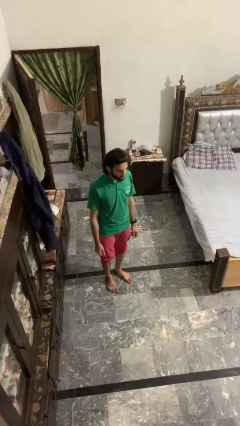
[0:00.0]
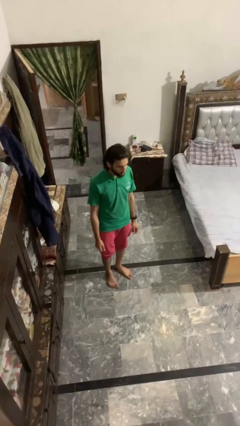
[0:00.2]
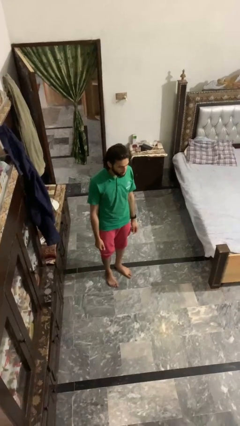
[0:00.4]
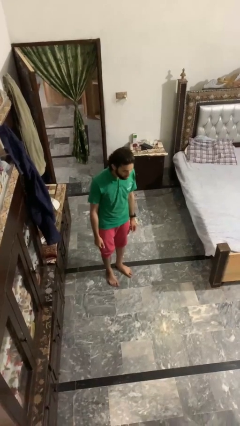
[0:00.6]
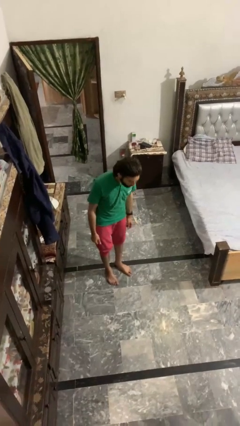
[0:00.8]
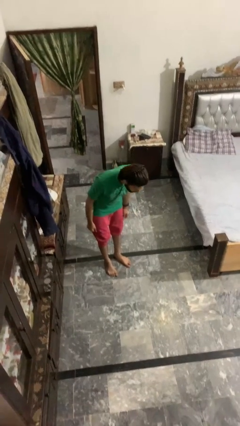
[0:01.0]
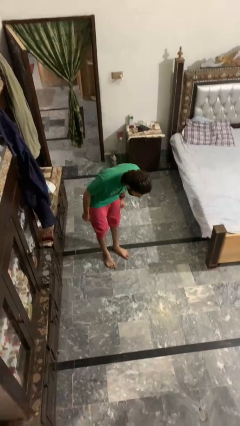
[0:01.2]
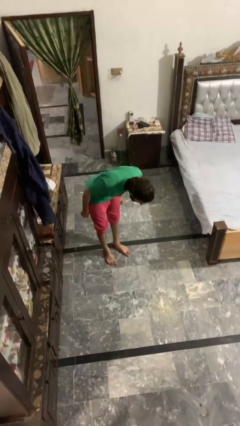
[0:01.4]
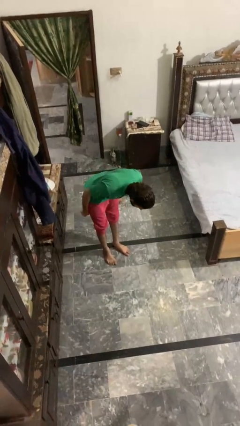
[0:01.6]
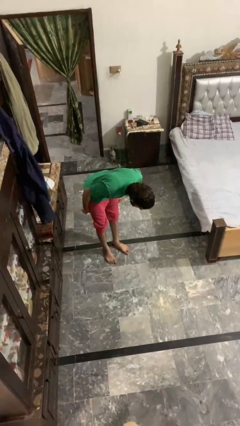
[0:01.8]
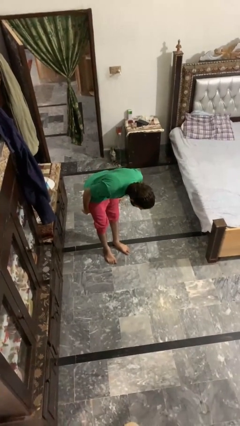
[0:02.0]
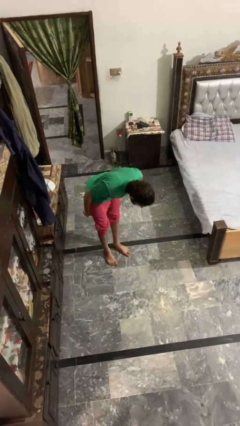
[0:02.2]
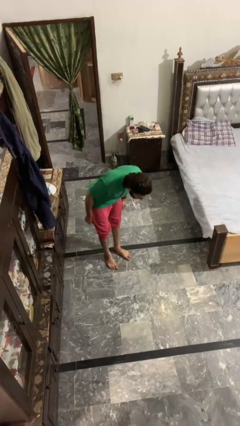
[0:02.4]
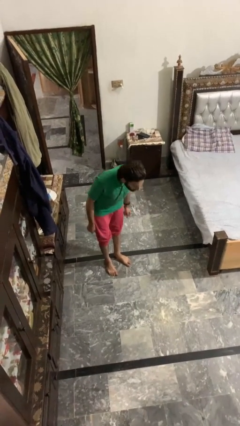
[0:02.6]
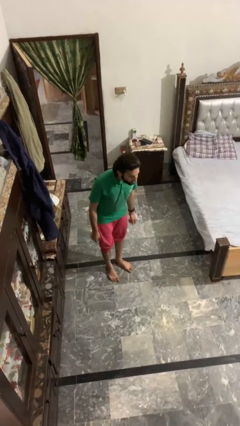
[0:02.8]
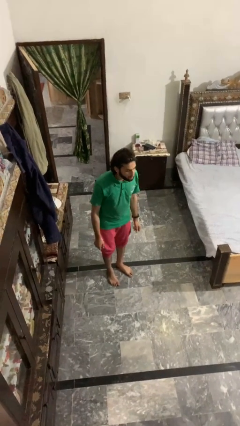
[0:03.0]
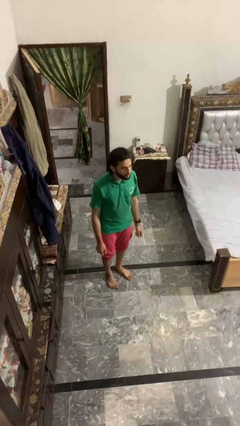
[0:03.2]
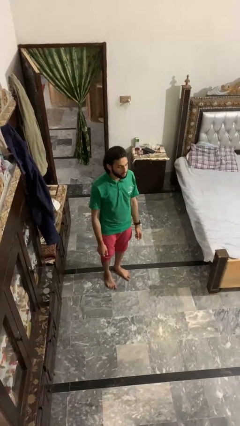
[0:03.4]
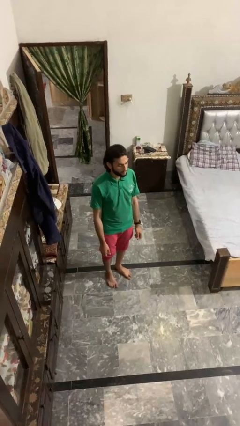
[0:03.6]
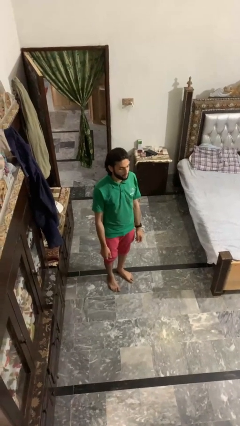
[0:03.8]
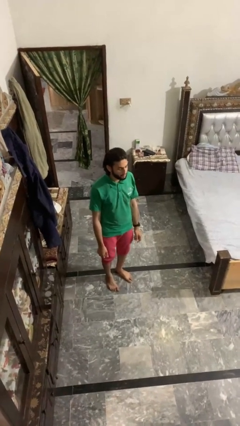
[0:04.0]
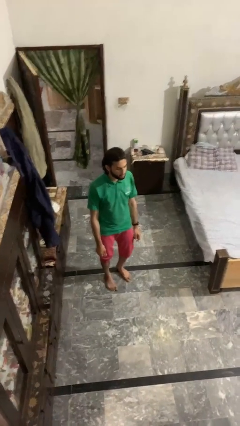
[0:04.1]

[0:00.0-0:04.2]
person bows

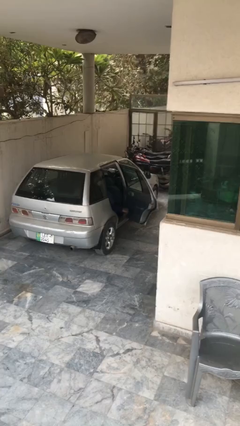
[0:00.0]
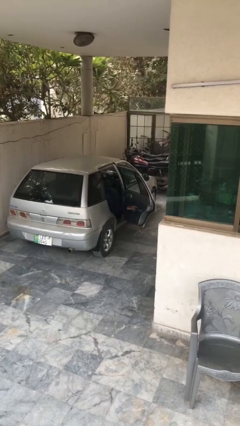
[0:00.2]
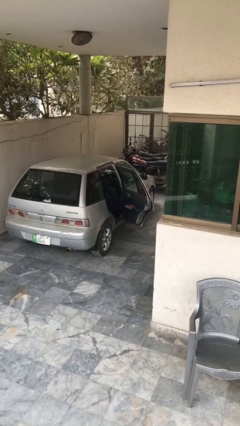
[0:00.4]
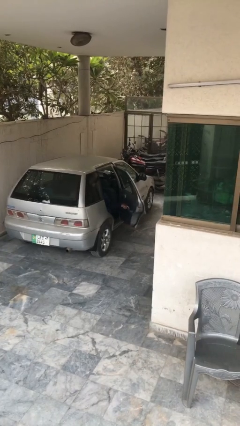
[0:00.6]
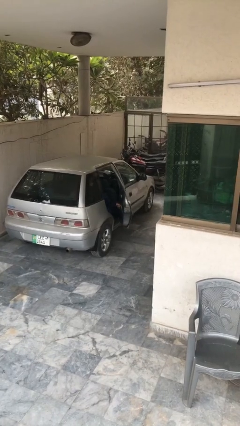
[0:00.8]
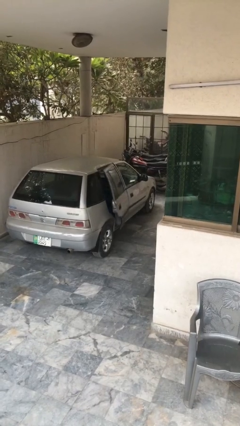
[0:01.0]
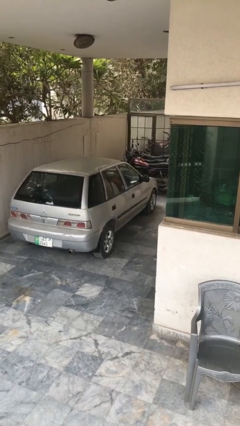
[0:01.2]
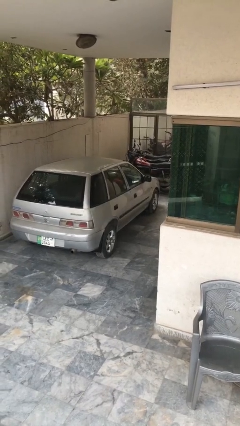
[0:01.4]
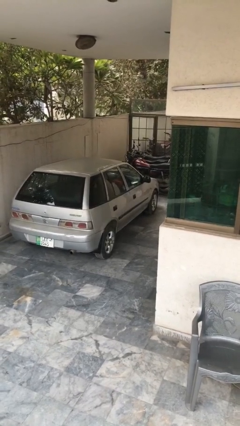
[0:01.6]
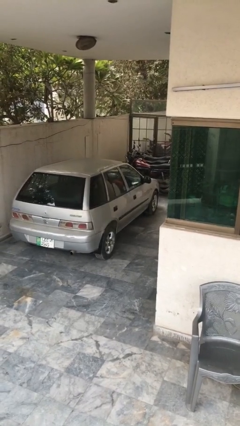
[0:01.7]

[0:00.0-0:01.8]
person closes car door

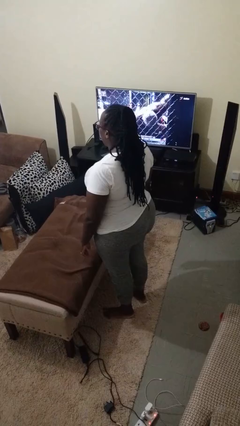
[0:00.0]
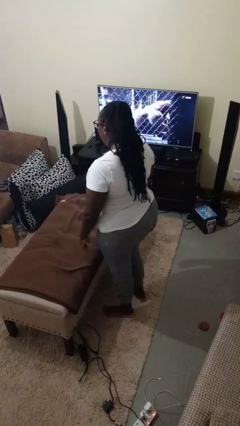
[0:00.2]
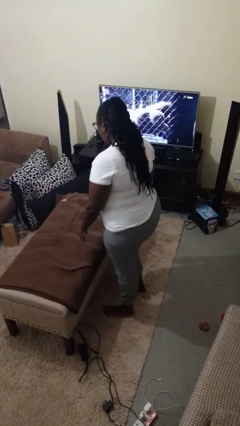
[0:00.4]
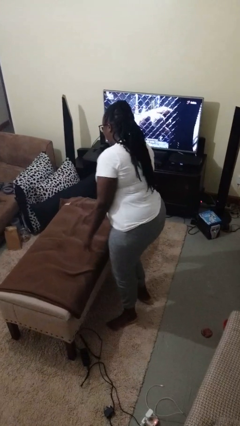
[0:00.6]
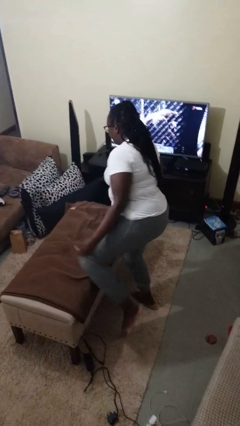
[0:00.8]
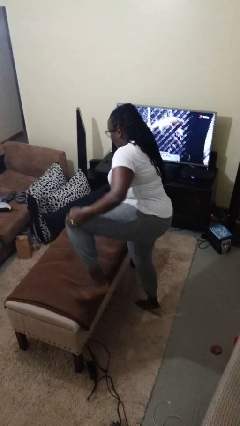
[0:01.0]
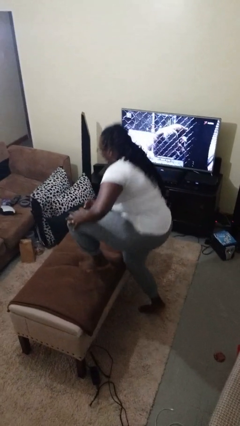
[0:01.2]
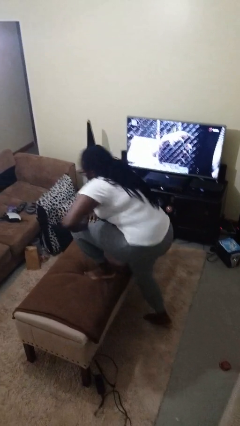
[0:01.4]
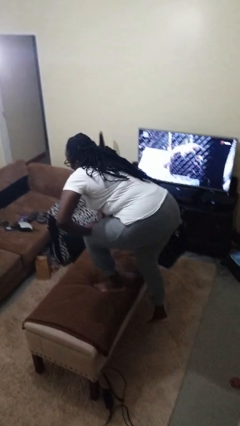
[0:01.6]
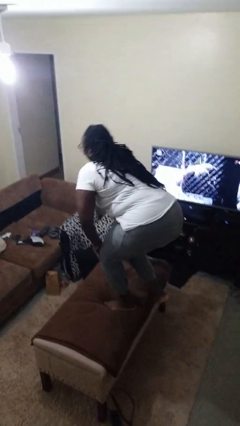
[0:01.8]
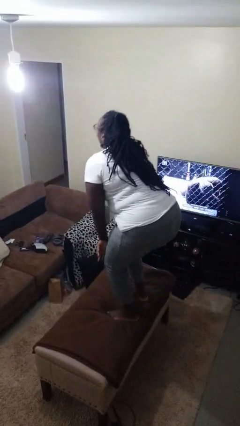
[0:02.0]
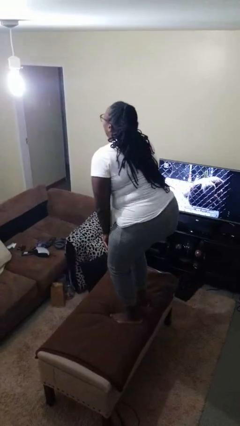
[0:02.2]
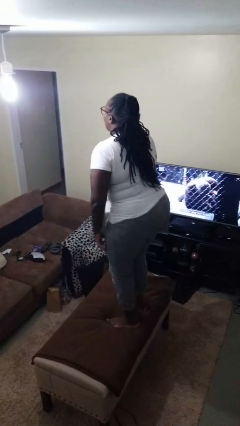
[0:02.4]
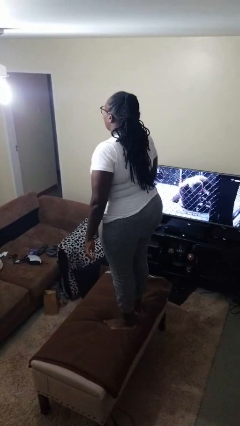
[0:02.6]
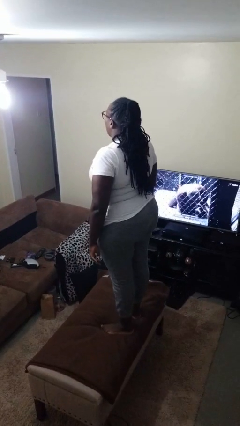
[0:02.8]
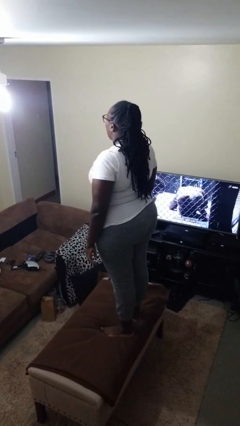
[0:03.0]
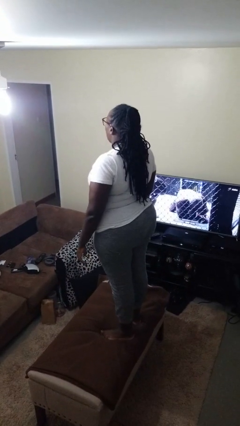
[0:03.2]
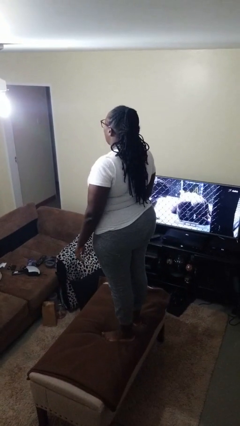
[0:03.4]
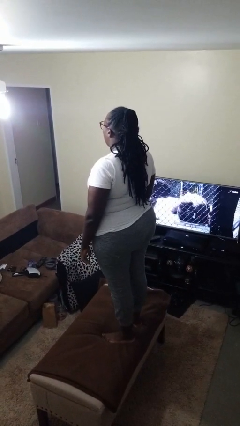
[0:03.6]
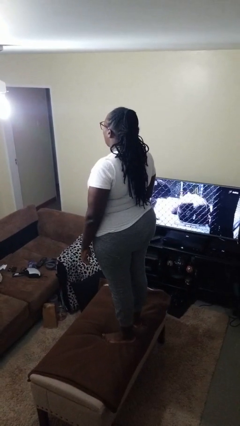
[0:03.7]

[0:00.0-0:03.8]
person climbs on table

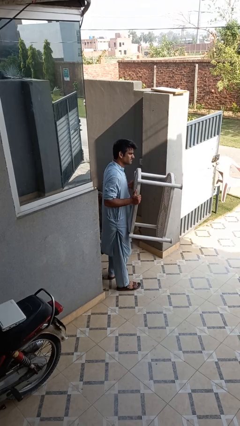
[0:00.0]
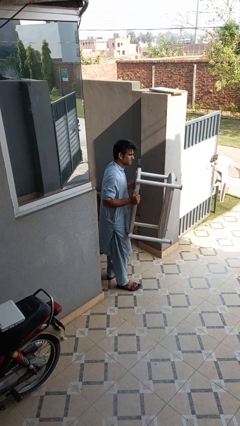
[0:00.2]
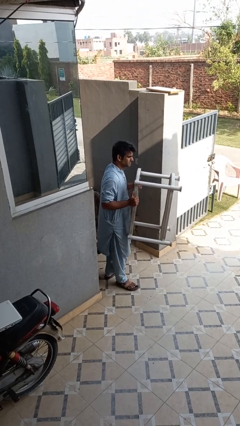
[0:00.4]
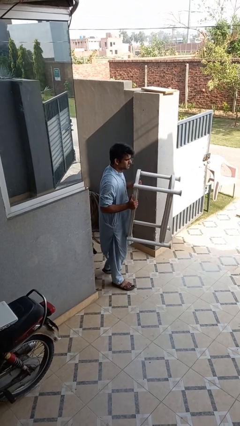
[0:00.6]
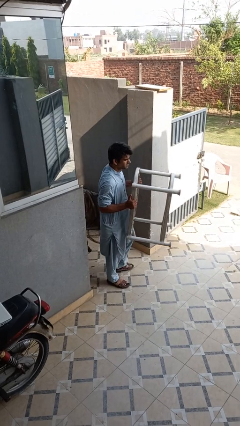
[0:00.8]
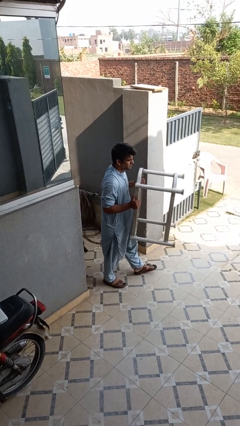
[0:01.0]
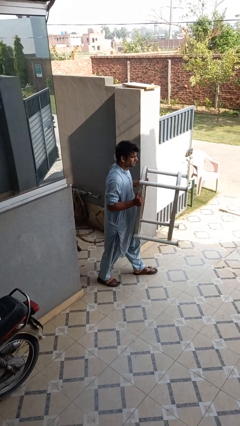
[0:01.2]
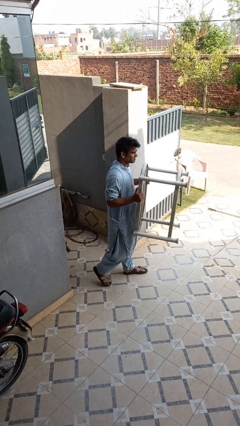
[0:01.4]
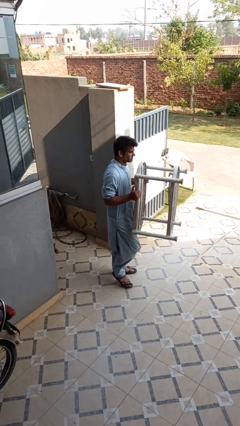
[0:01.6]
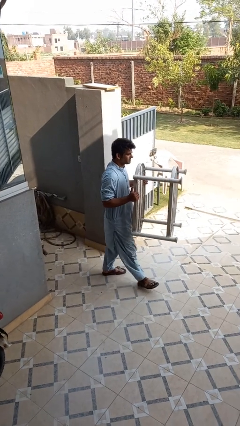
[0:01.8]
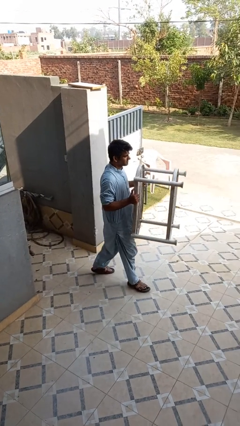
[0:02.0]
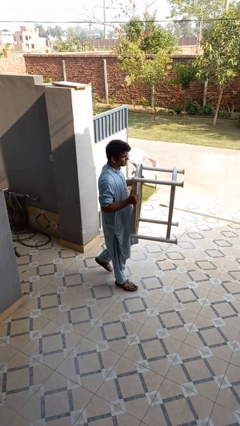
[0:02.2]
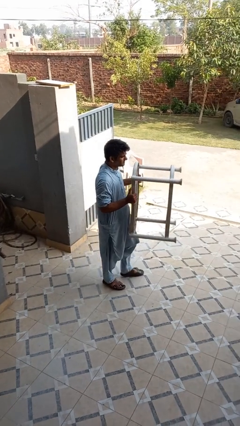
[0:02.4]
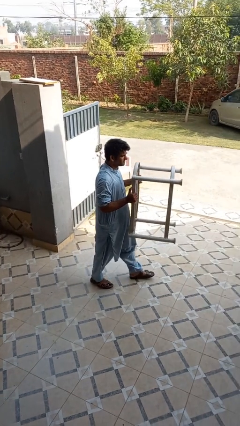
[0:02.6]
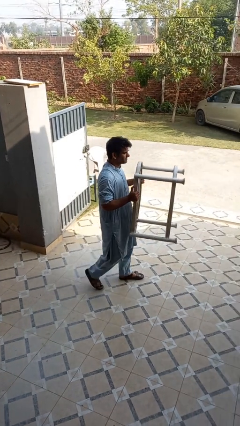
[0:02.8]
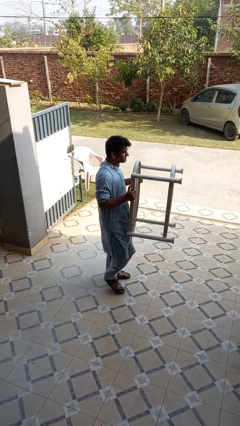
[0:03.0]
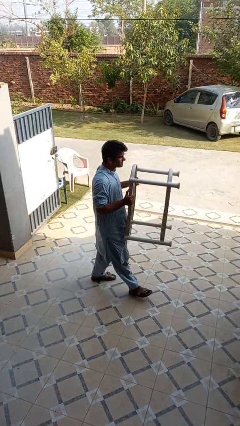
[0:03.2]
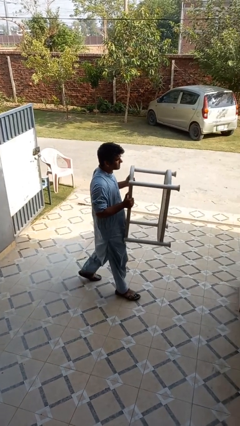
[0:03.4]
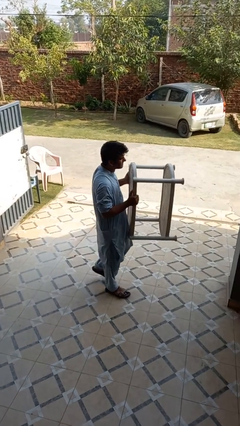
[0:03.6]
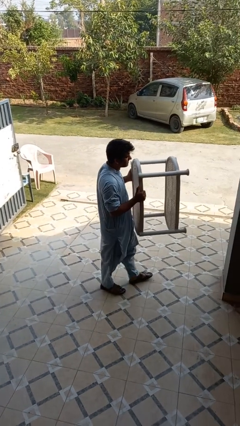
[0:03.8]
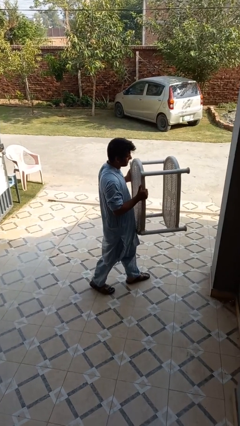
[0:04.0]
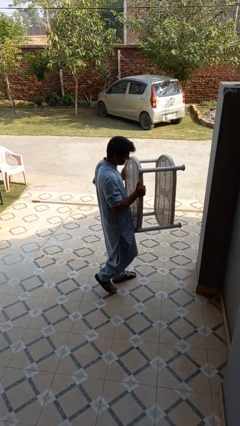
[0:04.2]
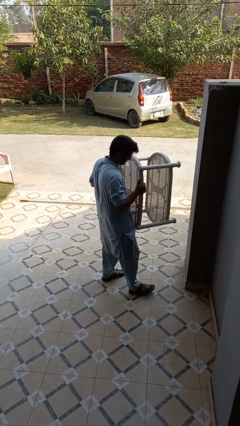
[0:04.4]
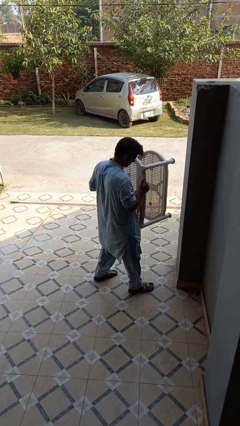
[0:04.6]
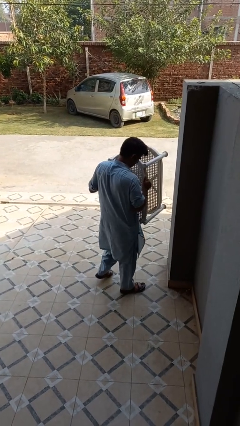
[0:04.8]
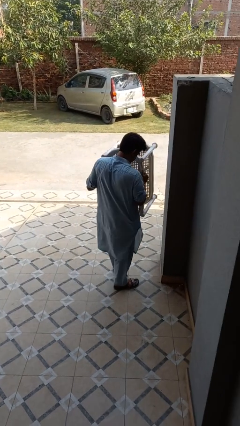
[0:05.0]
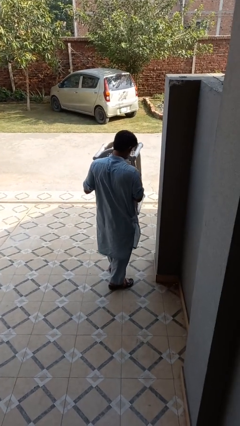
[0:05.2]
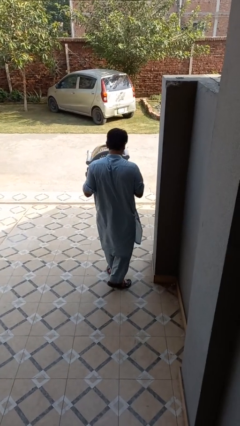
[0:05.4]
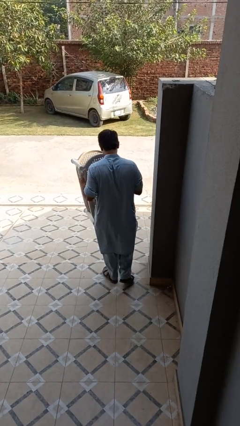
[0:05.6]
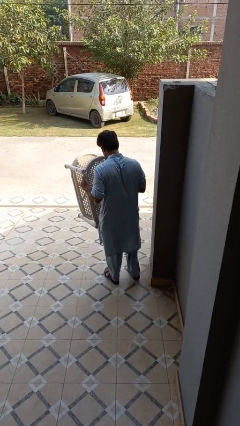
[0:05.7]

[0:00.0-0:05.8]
person carries furniture

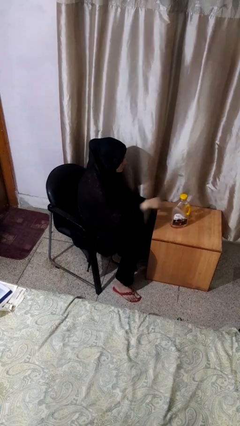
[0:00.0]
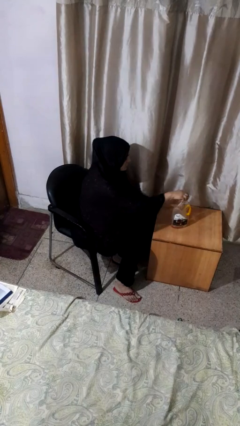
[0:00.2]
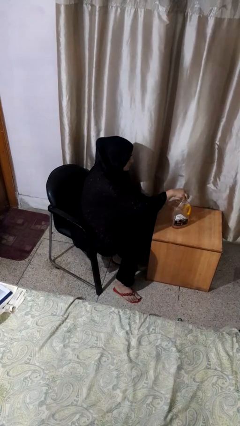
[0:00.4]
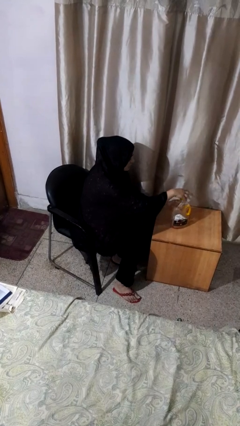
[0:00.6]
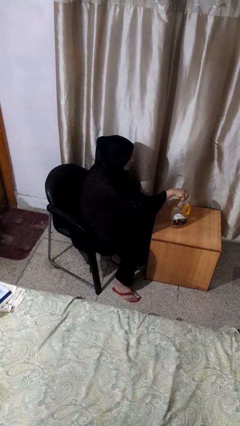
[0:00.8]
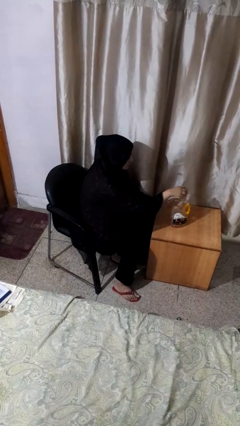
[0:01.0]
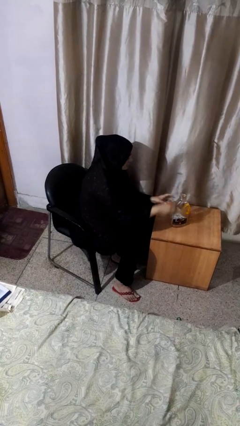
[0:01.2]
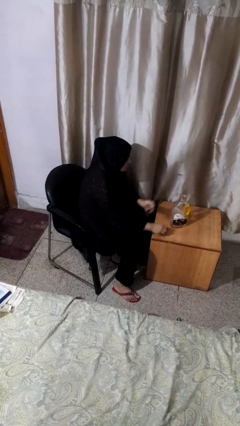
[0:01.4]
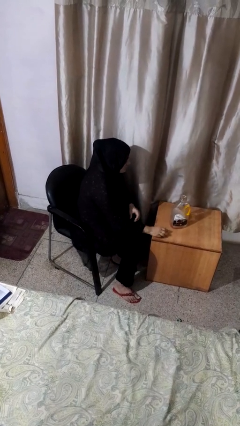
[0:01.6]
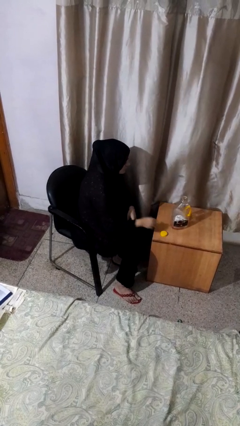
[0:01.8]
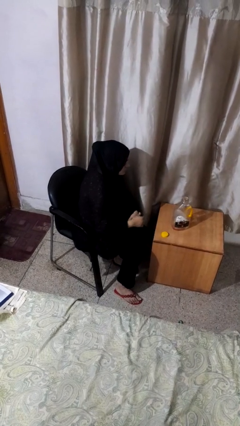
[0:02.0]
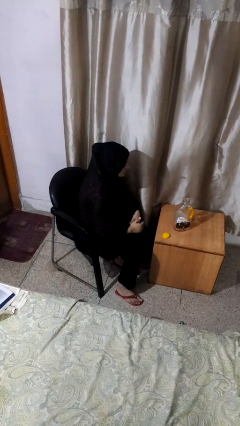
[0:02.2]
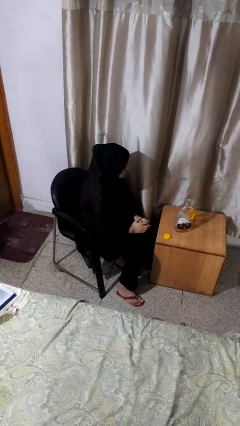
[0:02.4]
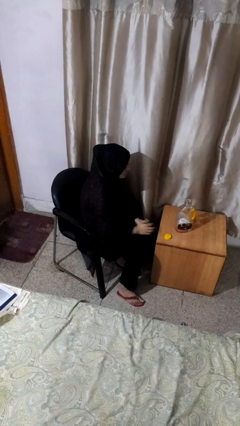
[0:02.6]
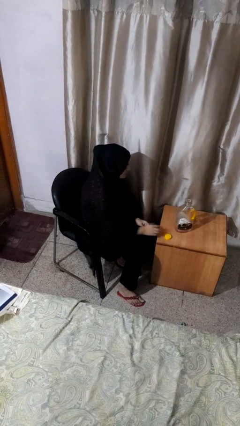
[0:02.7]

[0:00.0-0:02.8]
person unscrews lid from bottle
